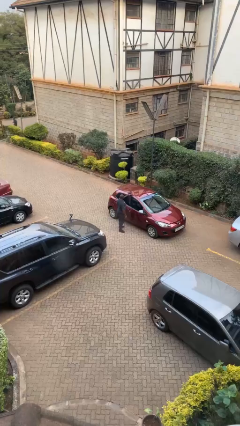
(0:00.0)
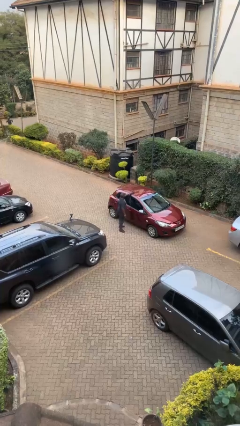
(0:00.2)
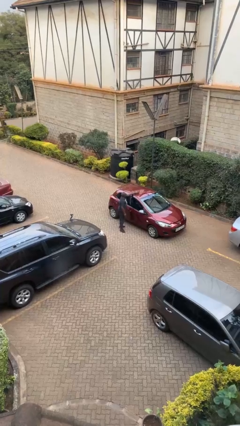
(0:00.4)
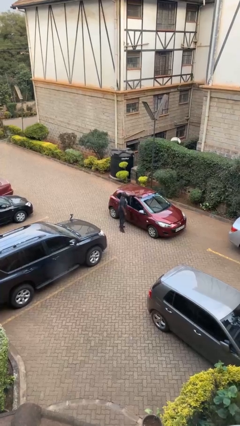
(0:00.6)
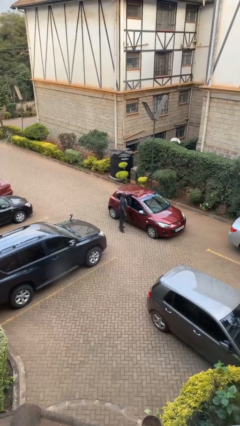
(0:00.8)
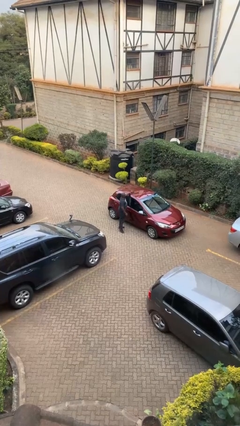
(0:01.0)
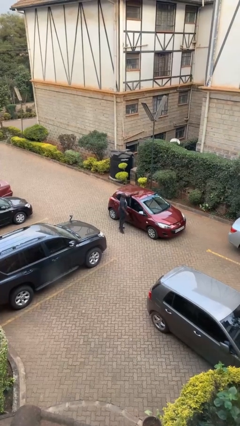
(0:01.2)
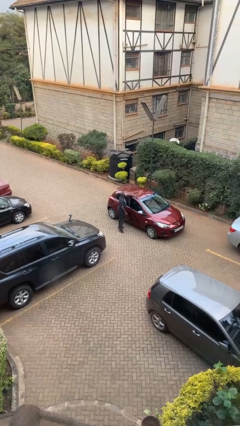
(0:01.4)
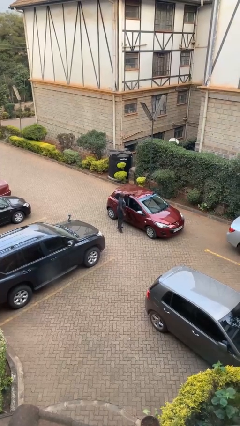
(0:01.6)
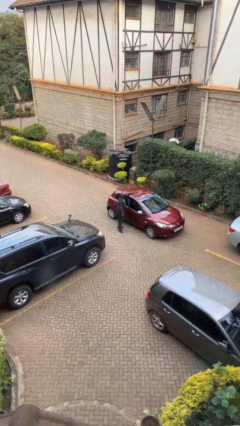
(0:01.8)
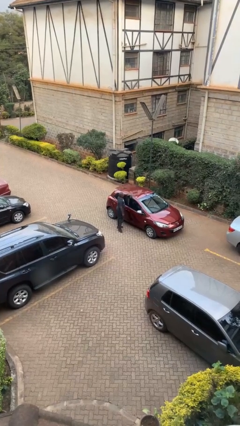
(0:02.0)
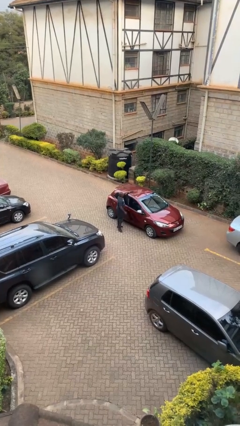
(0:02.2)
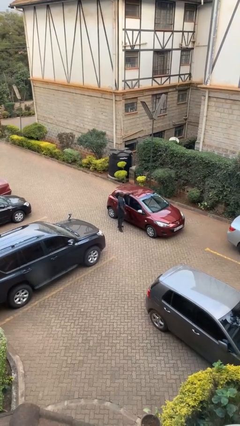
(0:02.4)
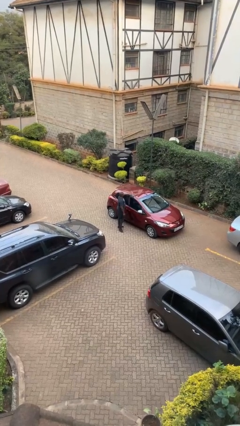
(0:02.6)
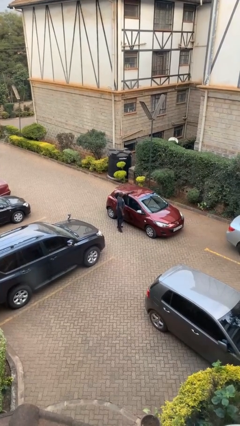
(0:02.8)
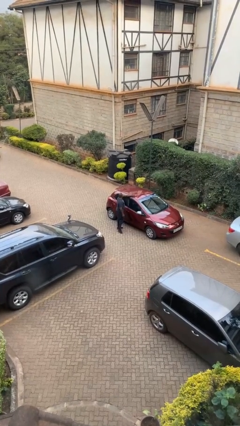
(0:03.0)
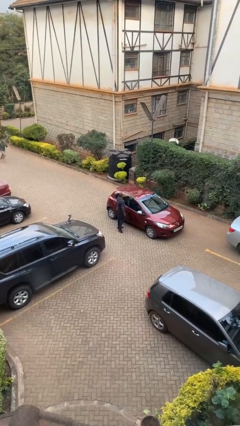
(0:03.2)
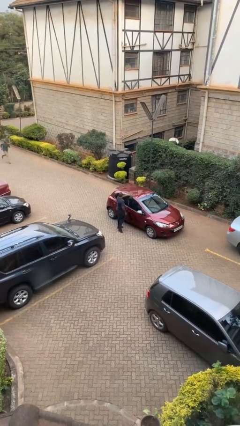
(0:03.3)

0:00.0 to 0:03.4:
person polishes car with rag

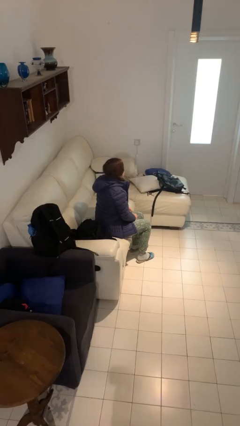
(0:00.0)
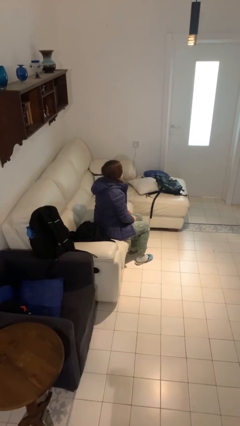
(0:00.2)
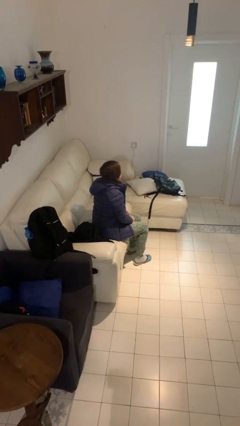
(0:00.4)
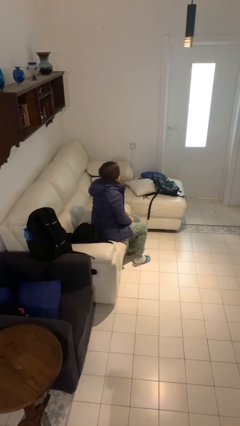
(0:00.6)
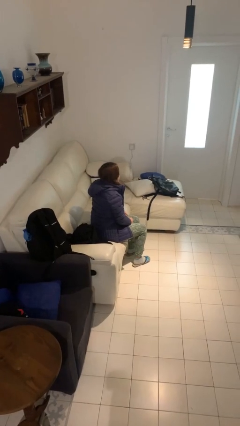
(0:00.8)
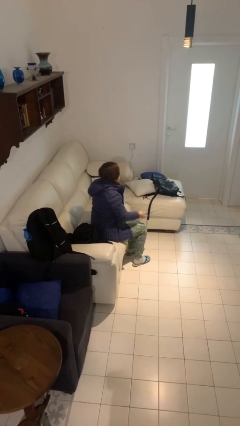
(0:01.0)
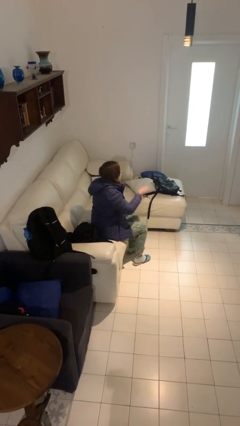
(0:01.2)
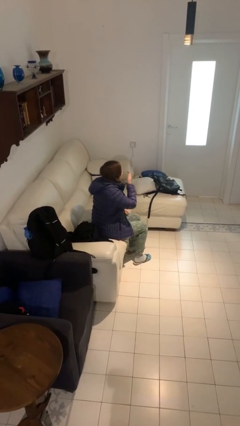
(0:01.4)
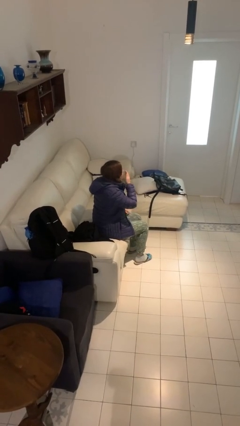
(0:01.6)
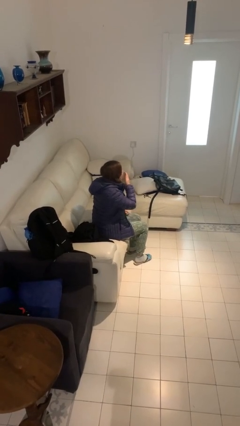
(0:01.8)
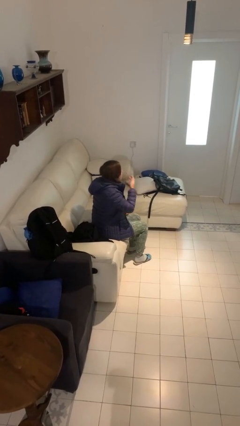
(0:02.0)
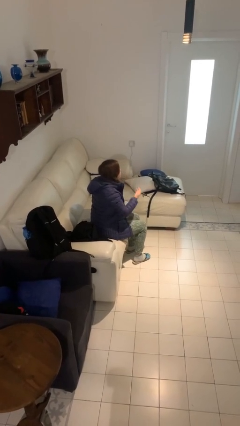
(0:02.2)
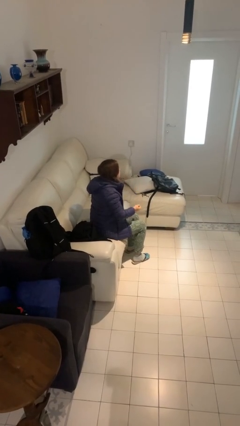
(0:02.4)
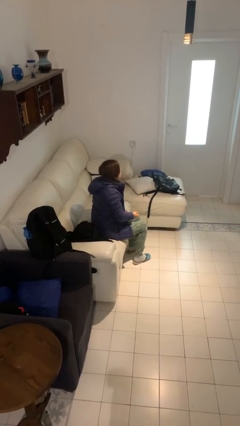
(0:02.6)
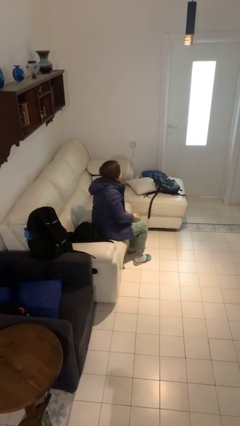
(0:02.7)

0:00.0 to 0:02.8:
person yawns

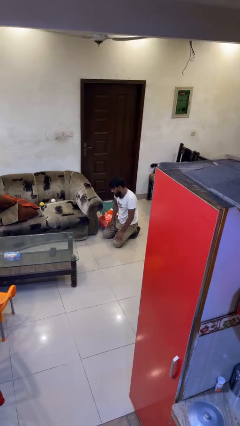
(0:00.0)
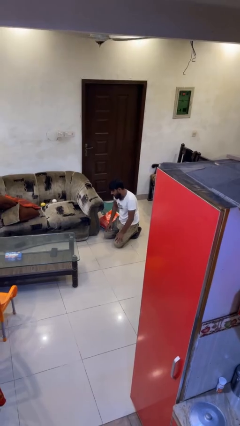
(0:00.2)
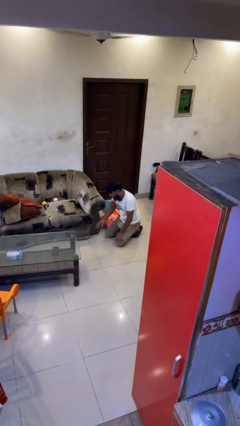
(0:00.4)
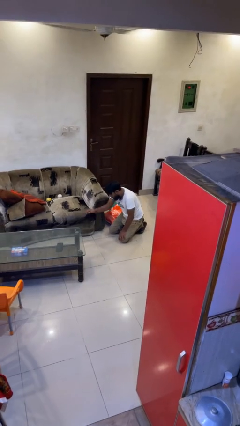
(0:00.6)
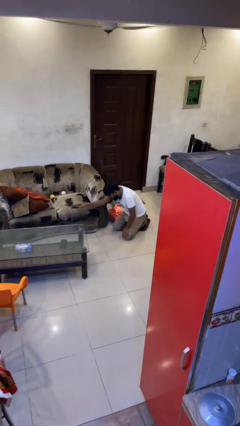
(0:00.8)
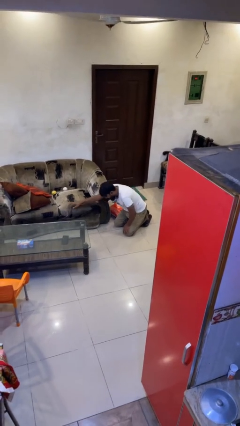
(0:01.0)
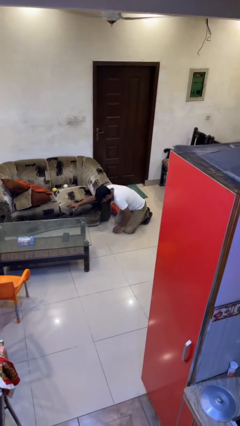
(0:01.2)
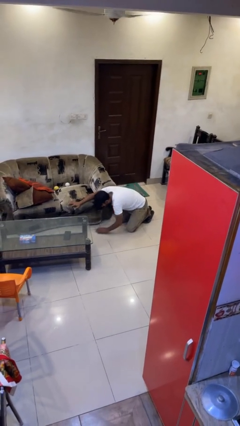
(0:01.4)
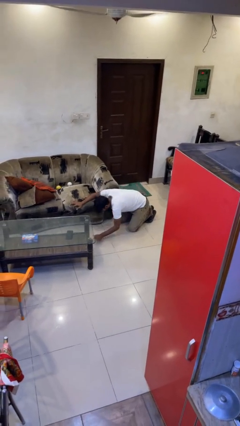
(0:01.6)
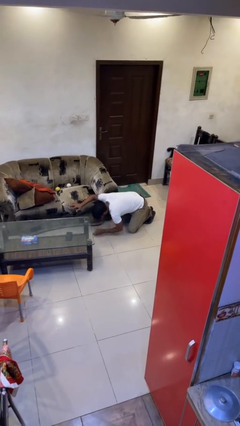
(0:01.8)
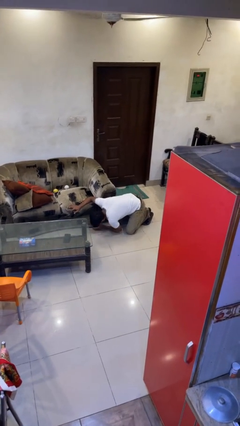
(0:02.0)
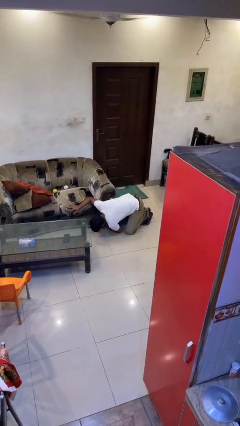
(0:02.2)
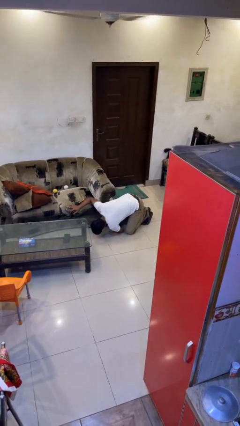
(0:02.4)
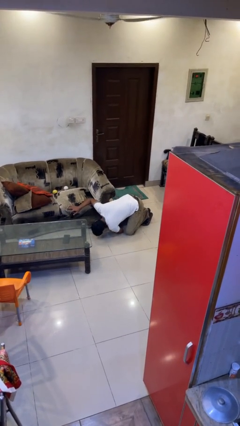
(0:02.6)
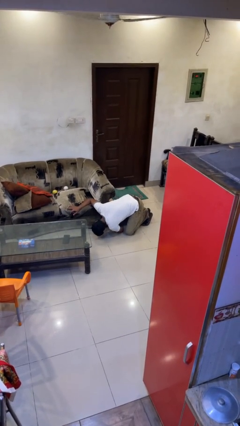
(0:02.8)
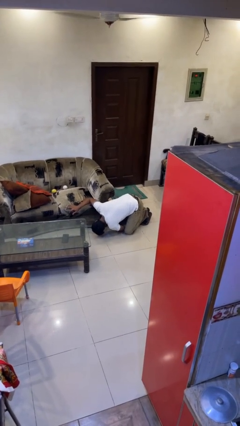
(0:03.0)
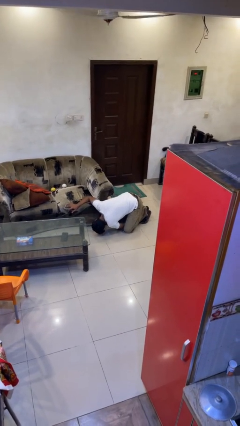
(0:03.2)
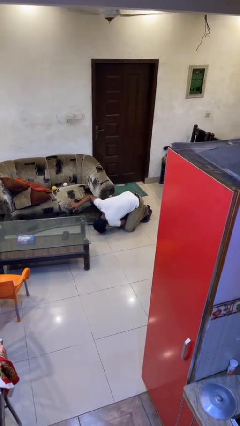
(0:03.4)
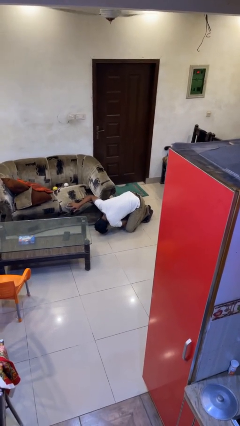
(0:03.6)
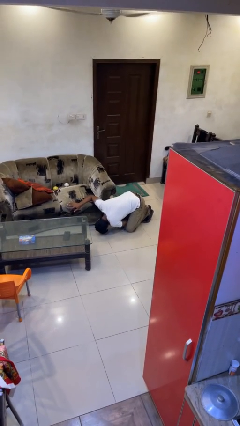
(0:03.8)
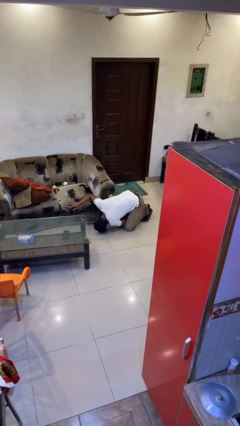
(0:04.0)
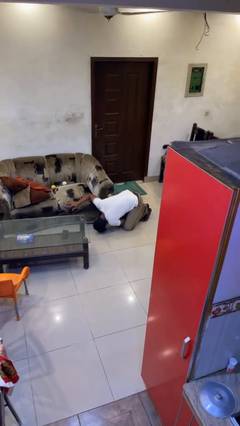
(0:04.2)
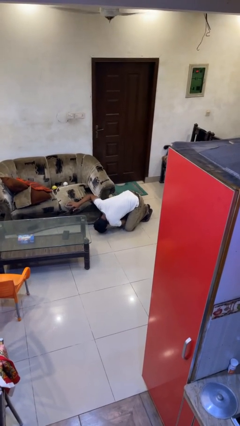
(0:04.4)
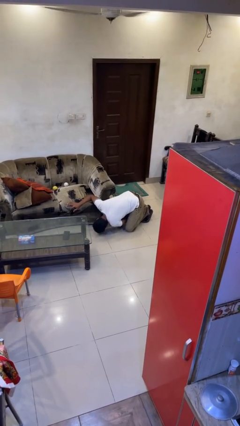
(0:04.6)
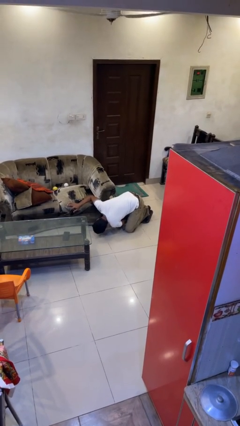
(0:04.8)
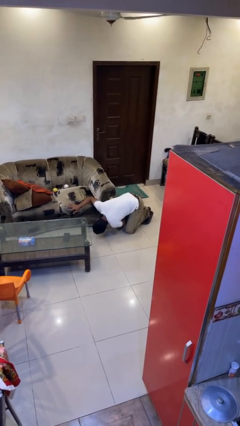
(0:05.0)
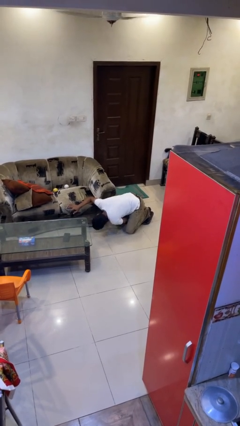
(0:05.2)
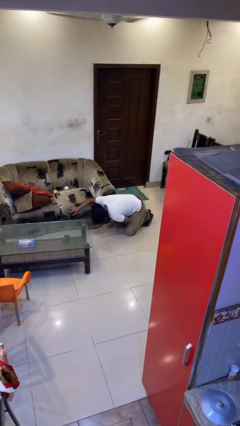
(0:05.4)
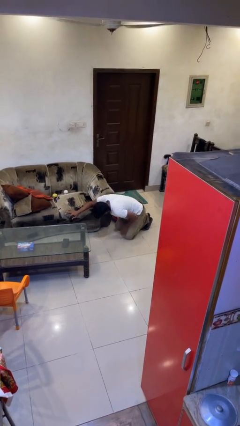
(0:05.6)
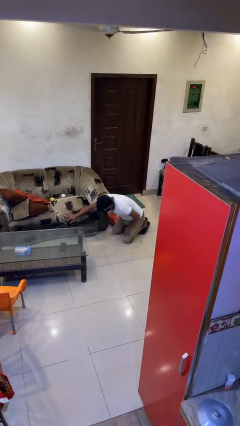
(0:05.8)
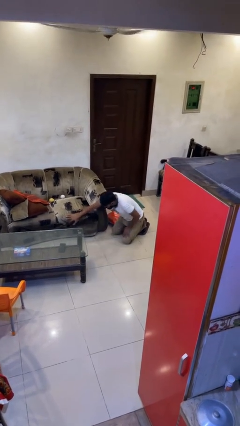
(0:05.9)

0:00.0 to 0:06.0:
person searches under couch

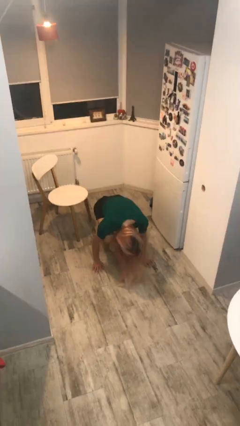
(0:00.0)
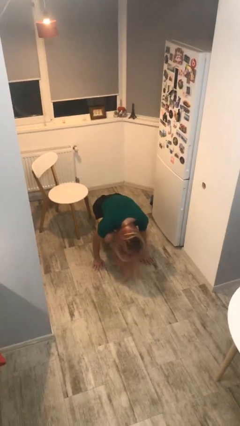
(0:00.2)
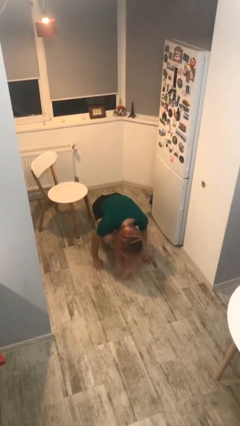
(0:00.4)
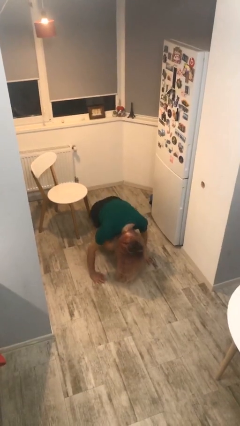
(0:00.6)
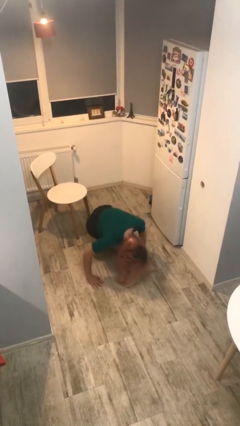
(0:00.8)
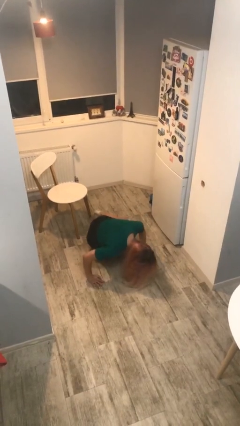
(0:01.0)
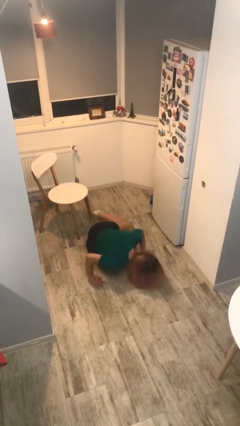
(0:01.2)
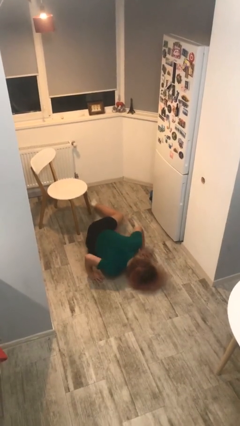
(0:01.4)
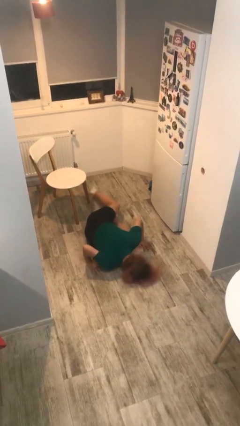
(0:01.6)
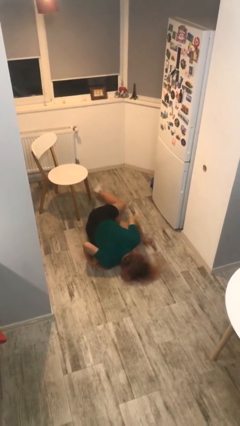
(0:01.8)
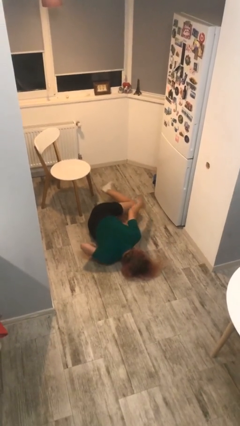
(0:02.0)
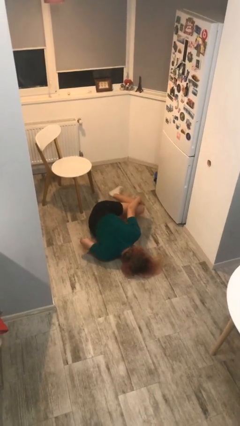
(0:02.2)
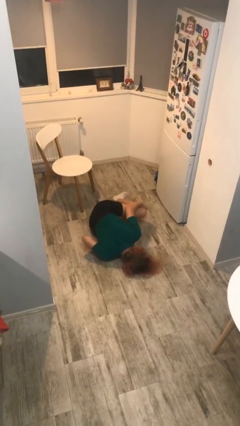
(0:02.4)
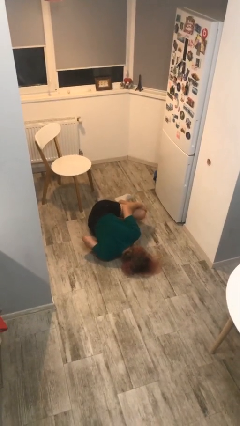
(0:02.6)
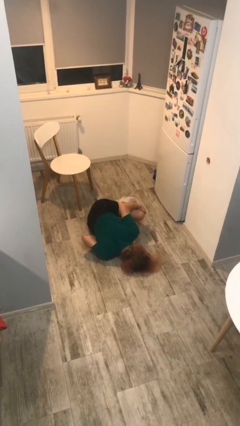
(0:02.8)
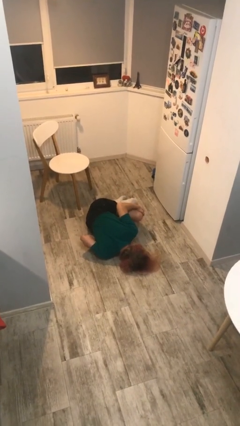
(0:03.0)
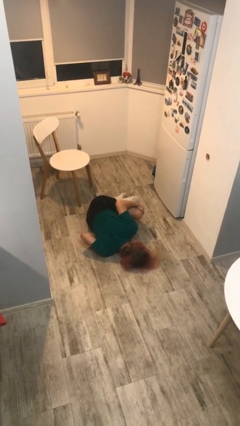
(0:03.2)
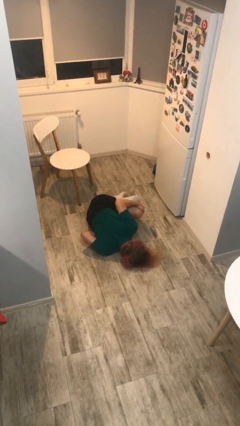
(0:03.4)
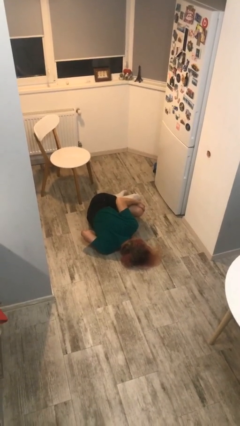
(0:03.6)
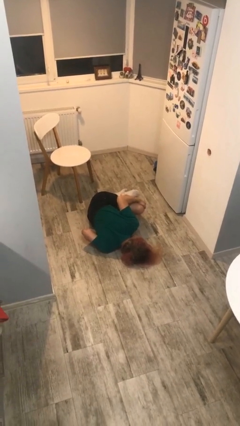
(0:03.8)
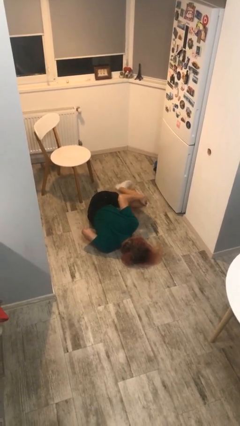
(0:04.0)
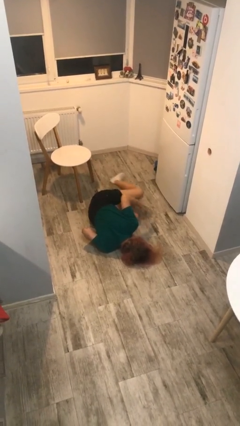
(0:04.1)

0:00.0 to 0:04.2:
person lies down on floor

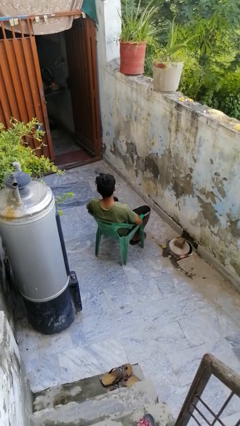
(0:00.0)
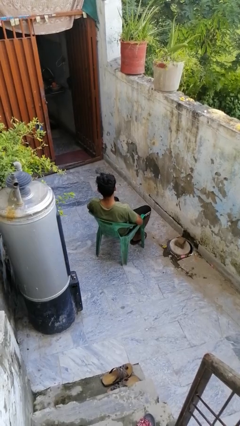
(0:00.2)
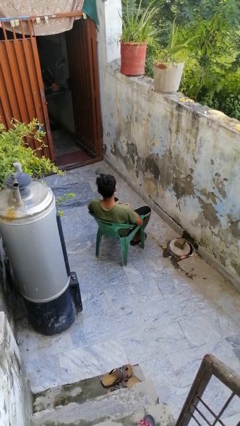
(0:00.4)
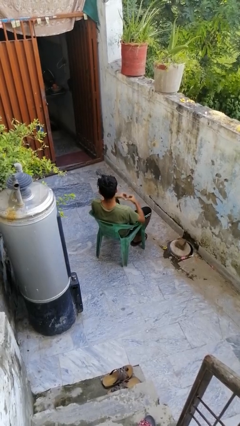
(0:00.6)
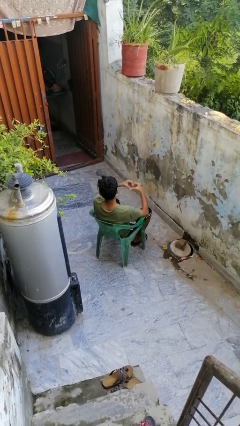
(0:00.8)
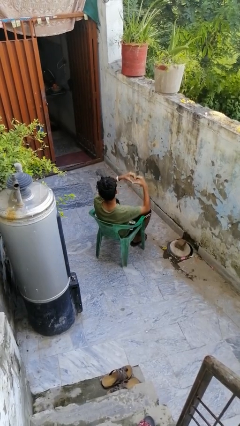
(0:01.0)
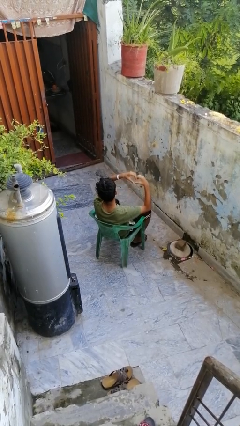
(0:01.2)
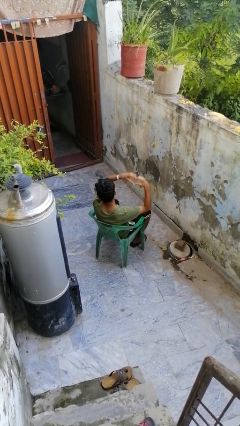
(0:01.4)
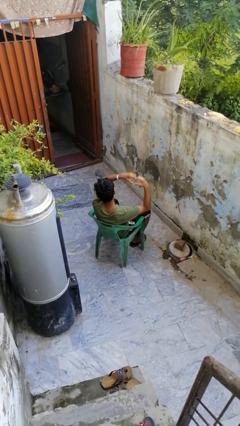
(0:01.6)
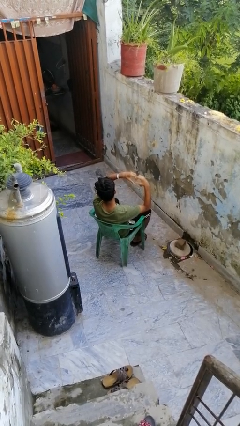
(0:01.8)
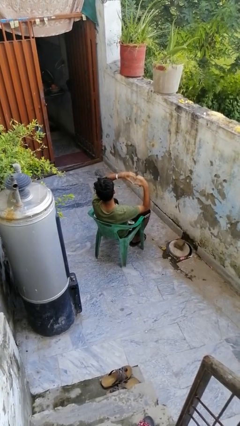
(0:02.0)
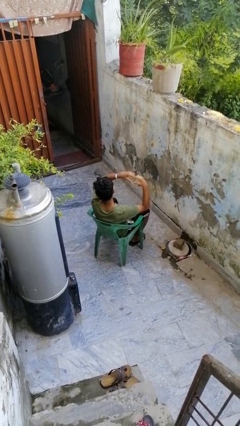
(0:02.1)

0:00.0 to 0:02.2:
person gestures heart
